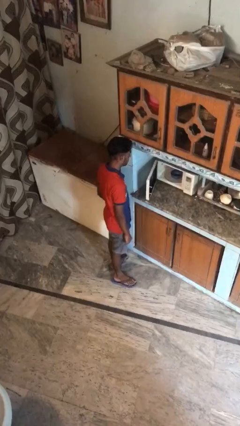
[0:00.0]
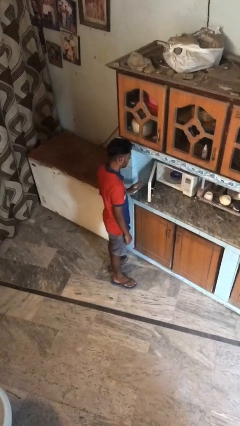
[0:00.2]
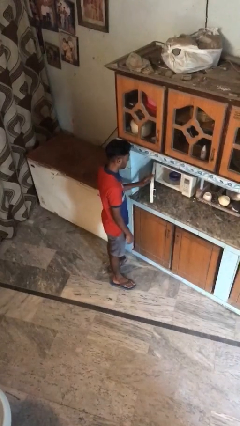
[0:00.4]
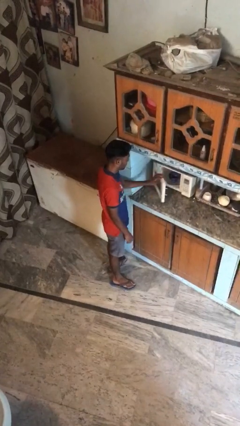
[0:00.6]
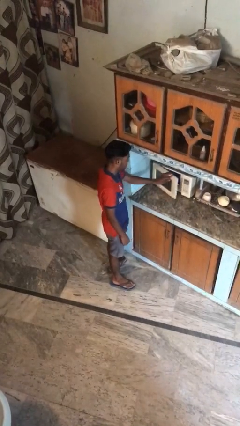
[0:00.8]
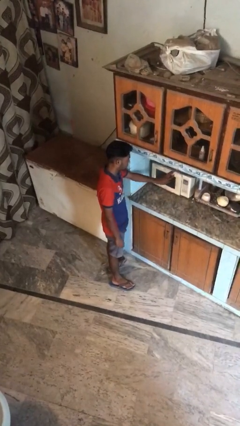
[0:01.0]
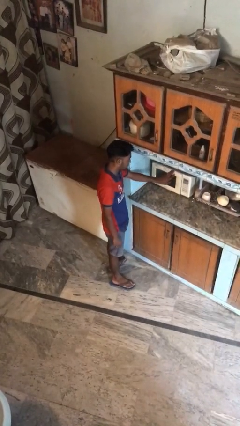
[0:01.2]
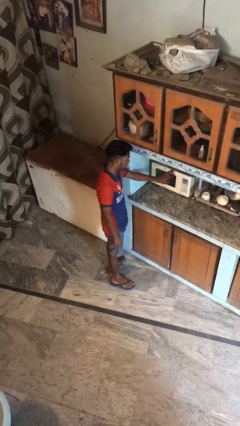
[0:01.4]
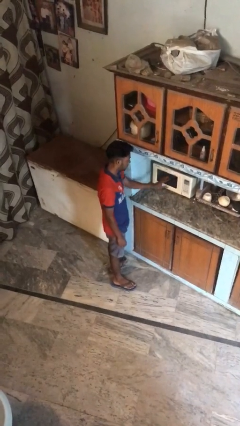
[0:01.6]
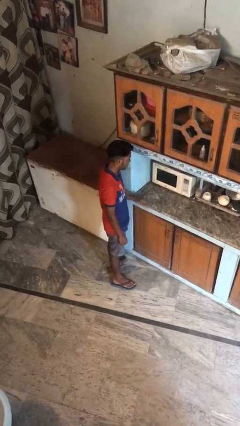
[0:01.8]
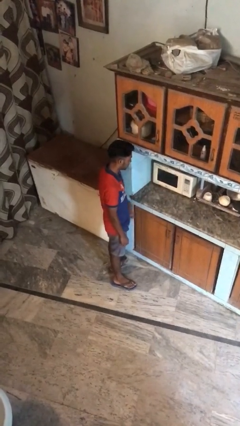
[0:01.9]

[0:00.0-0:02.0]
person closes oven door

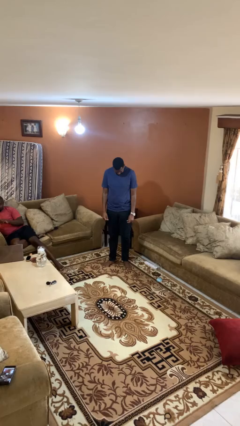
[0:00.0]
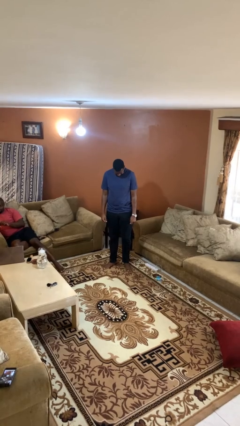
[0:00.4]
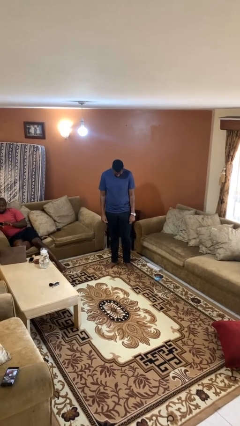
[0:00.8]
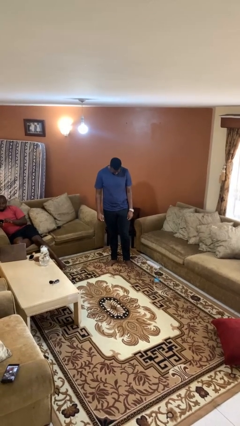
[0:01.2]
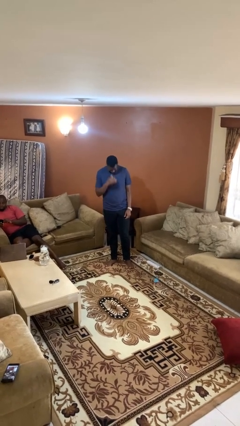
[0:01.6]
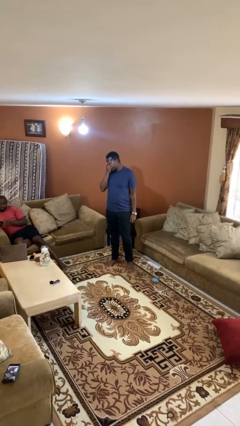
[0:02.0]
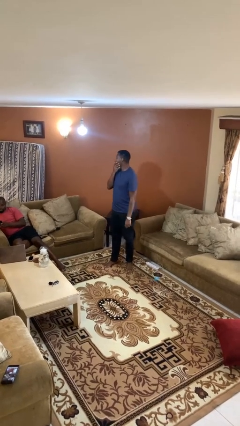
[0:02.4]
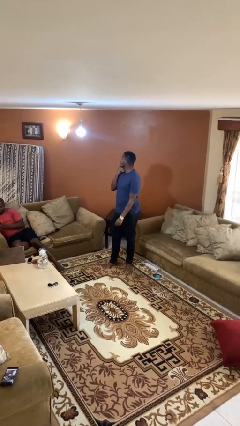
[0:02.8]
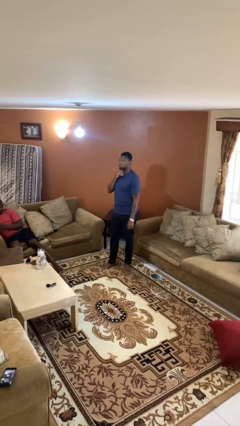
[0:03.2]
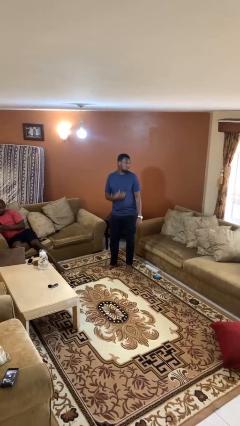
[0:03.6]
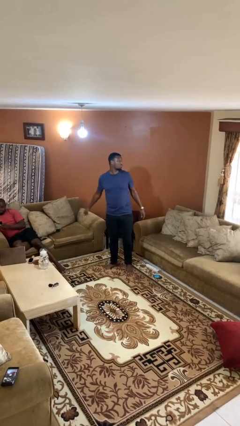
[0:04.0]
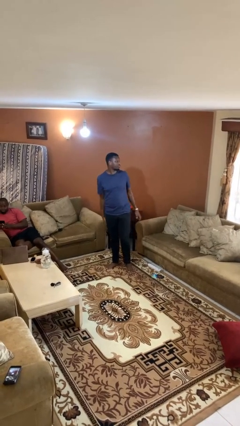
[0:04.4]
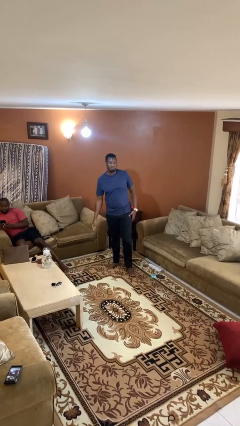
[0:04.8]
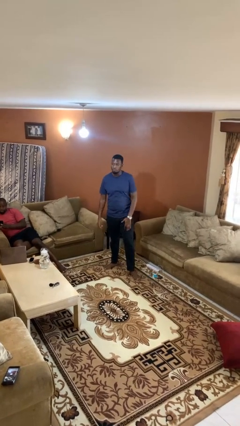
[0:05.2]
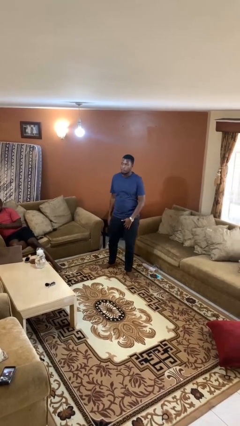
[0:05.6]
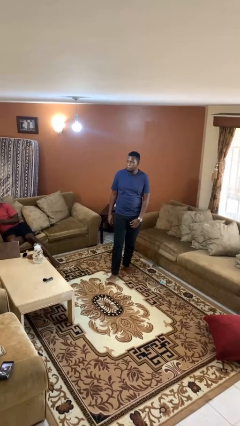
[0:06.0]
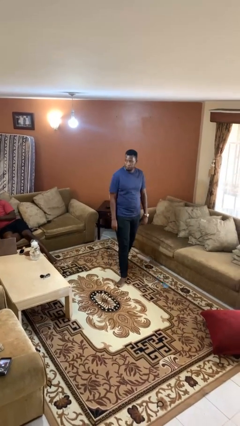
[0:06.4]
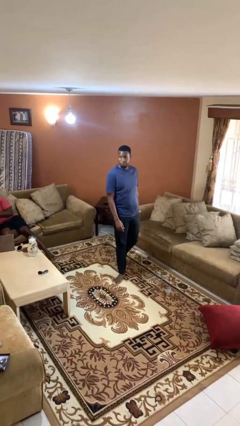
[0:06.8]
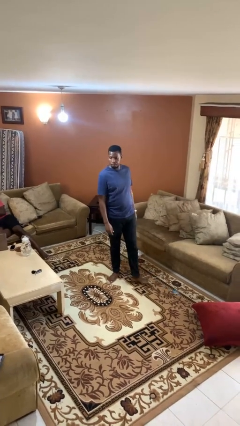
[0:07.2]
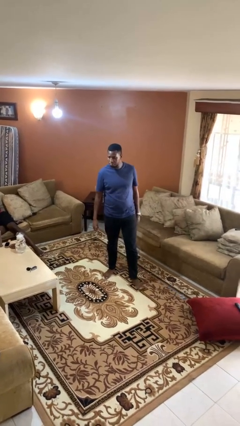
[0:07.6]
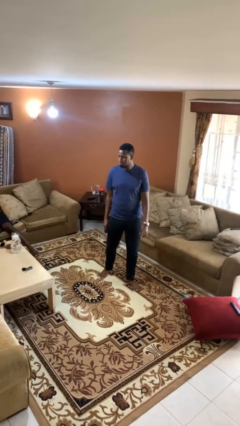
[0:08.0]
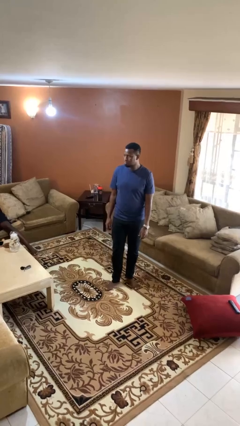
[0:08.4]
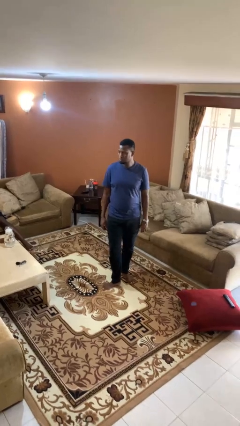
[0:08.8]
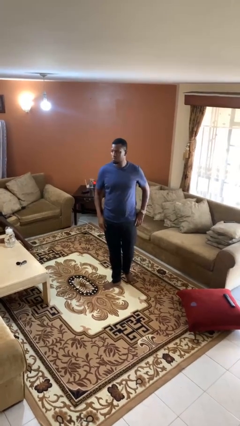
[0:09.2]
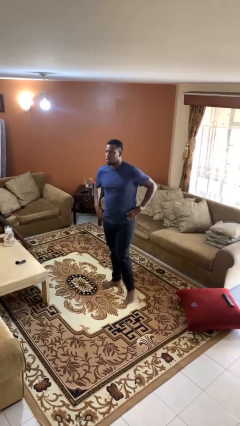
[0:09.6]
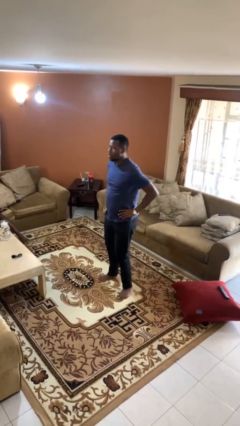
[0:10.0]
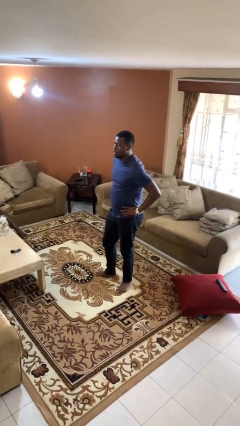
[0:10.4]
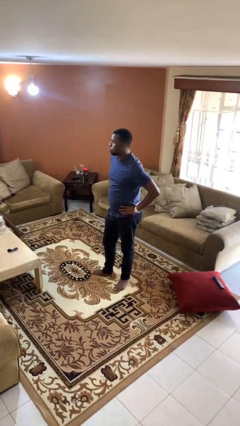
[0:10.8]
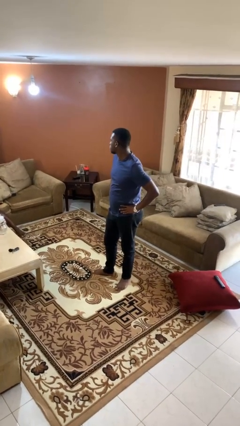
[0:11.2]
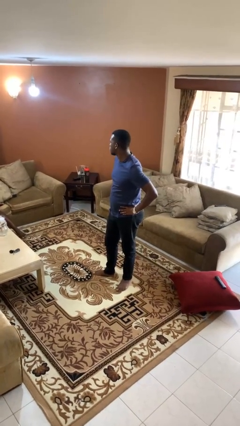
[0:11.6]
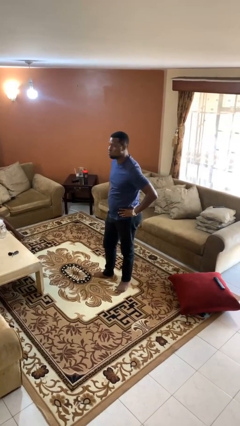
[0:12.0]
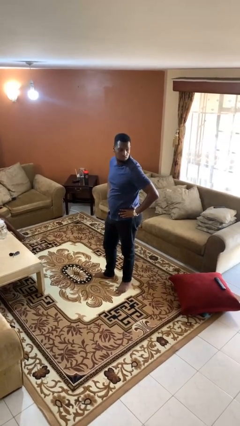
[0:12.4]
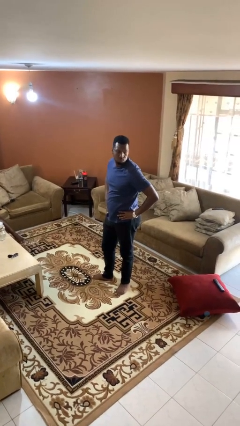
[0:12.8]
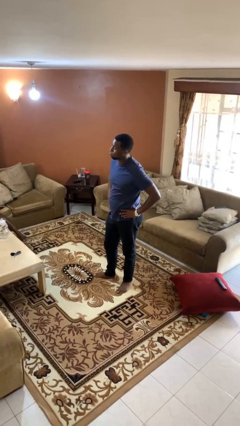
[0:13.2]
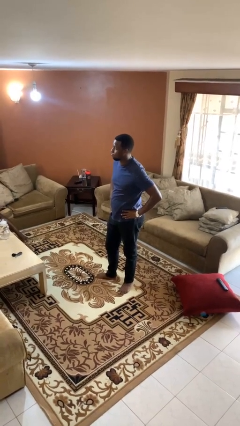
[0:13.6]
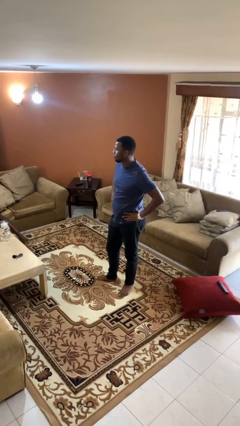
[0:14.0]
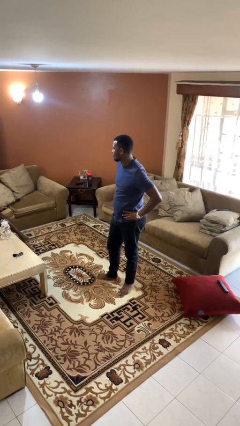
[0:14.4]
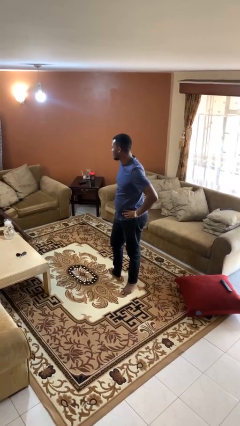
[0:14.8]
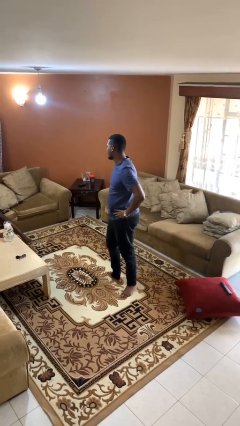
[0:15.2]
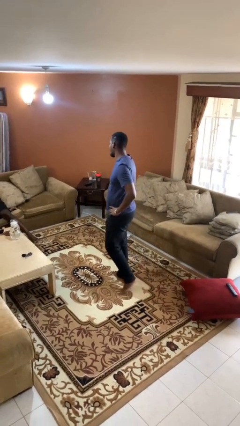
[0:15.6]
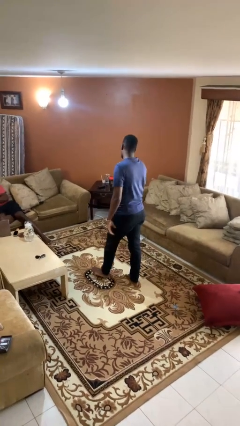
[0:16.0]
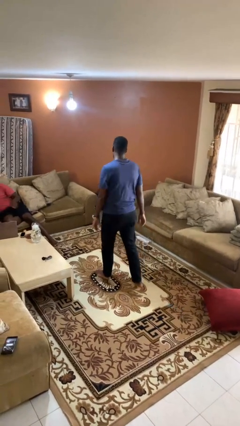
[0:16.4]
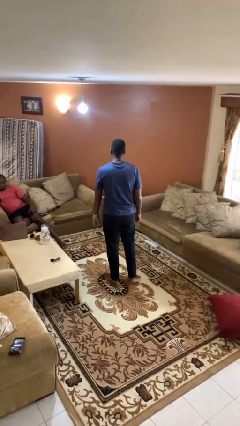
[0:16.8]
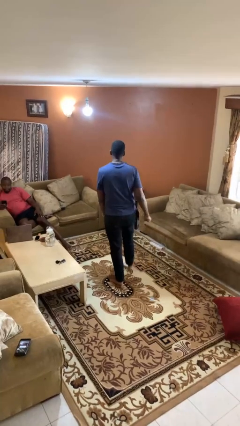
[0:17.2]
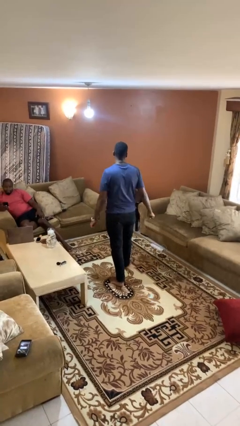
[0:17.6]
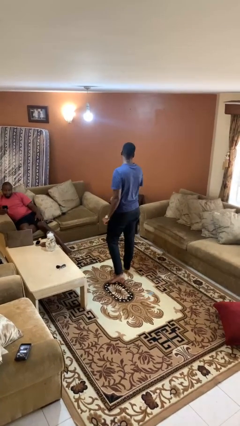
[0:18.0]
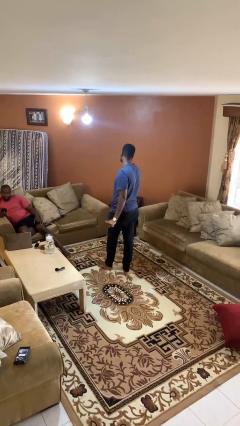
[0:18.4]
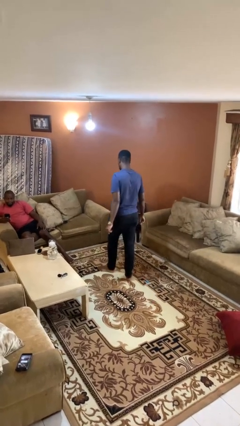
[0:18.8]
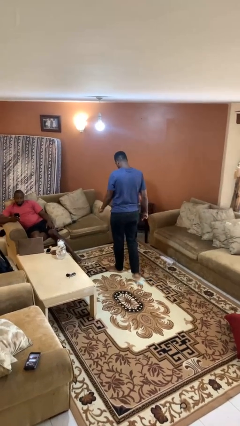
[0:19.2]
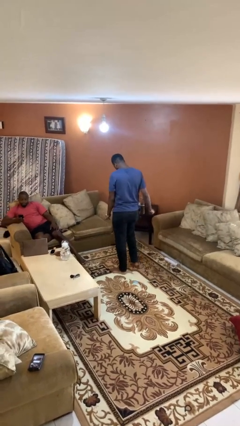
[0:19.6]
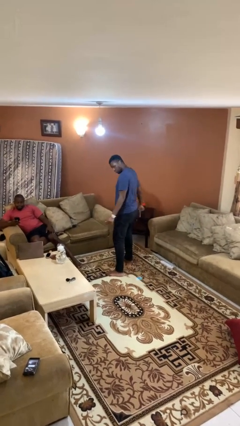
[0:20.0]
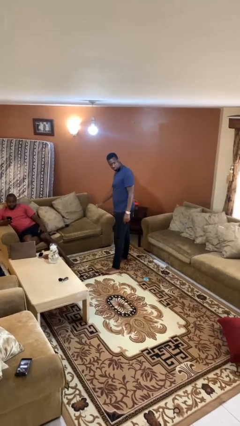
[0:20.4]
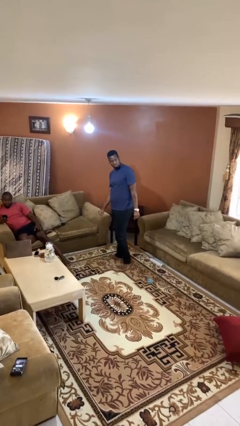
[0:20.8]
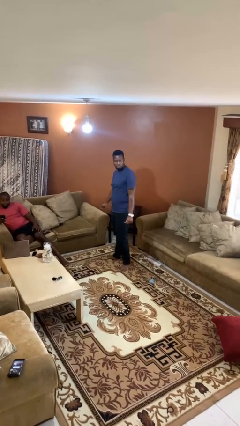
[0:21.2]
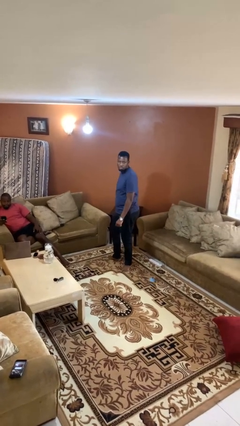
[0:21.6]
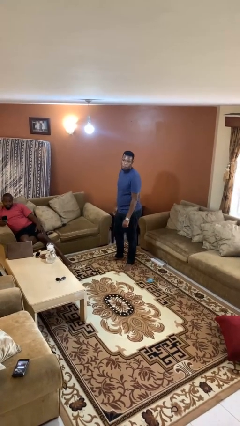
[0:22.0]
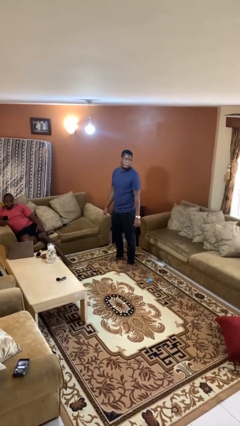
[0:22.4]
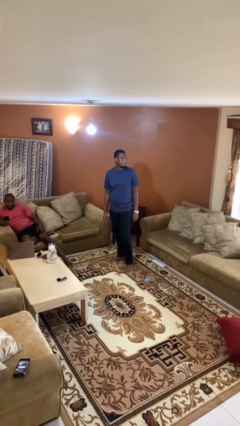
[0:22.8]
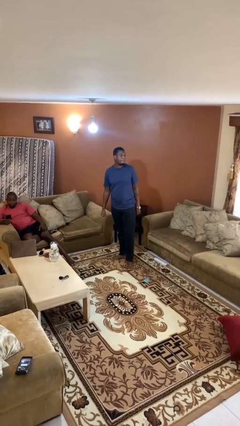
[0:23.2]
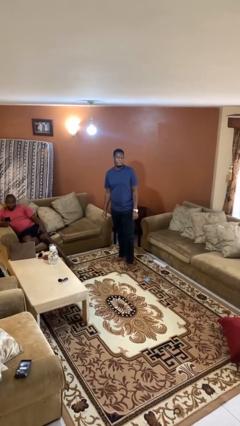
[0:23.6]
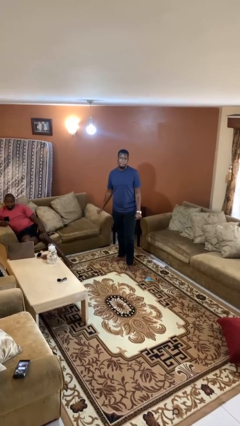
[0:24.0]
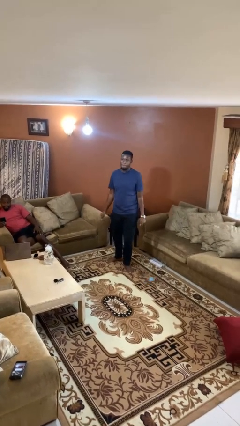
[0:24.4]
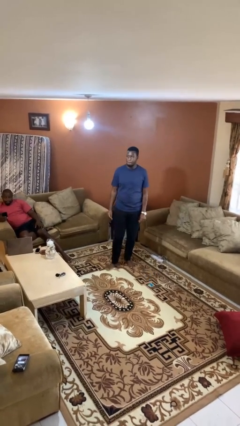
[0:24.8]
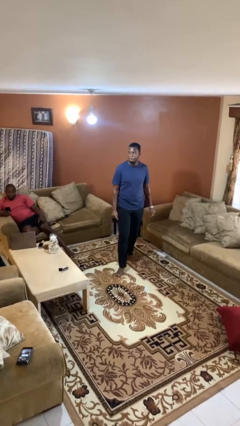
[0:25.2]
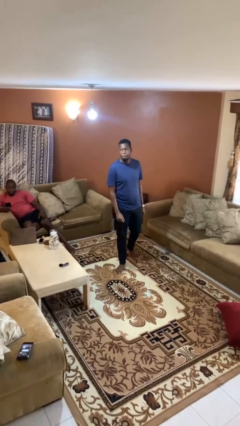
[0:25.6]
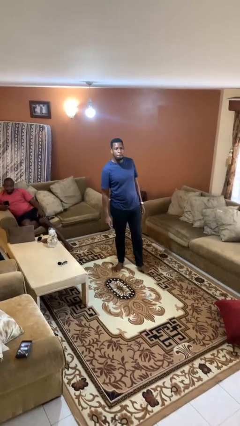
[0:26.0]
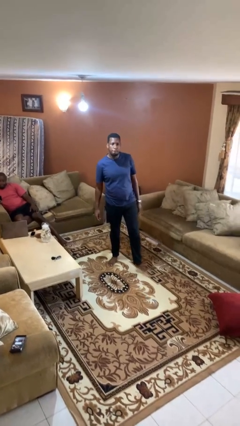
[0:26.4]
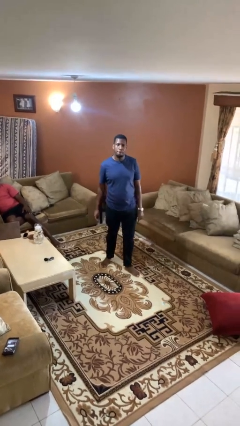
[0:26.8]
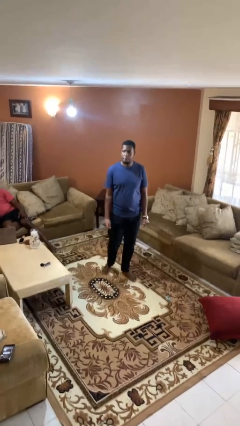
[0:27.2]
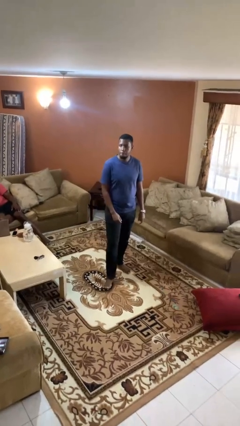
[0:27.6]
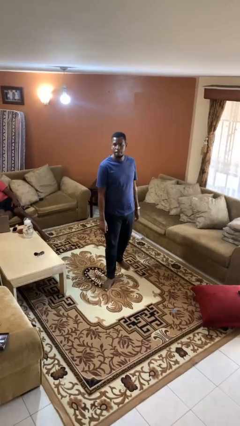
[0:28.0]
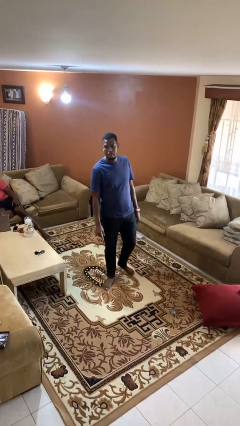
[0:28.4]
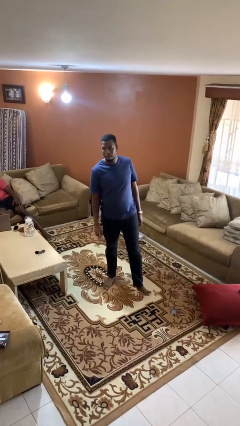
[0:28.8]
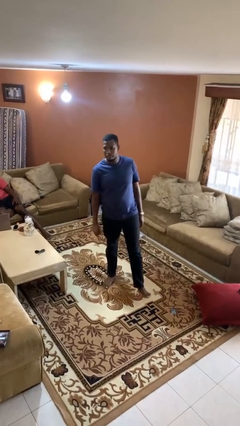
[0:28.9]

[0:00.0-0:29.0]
person walks

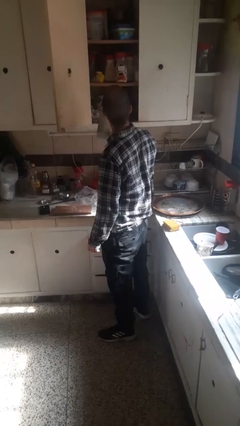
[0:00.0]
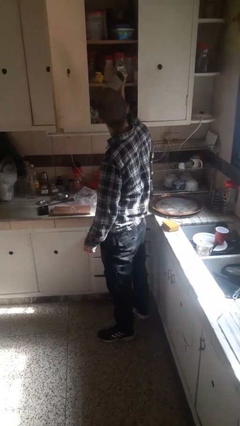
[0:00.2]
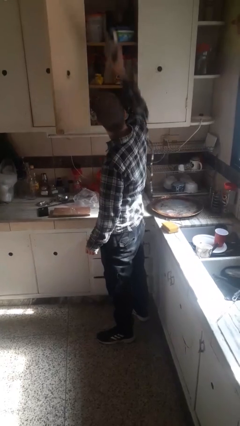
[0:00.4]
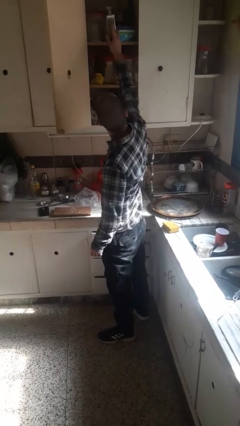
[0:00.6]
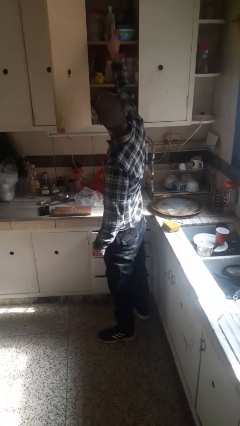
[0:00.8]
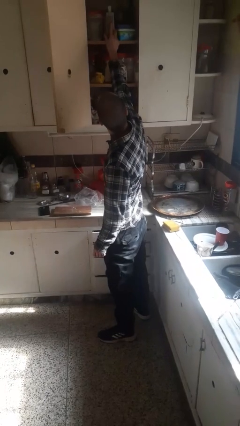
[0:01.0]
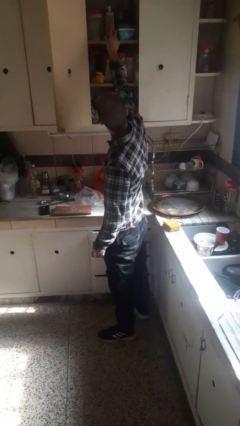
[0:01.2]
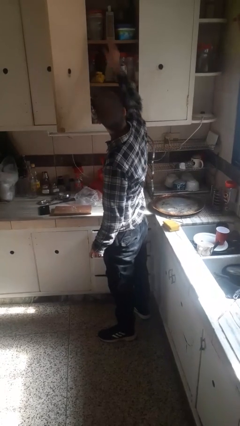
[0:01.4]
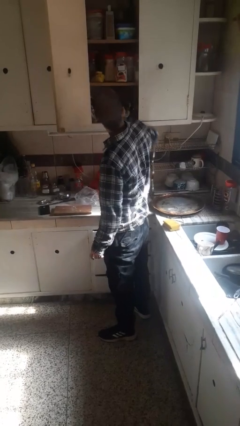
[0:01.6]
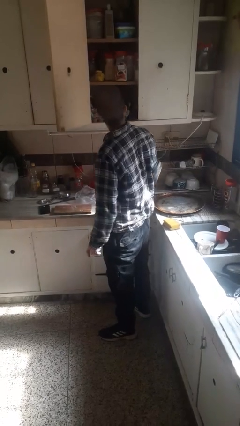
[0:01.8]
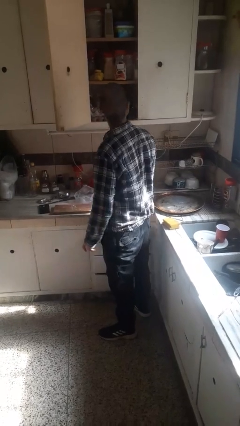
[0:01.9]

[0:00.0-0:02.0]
person picks up object from cabinet
